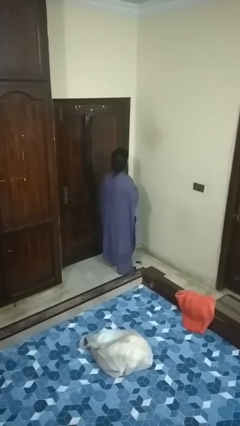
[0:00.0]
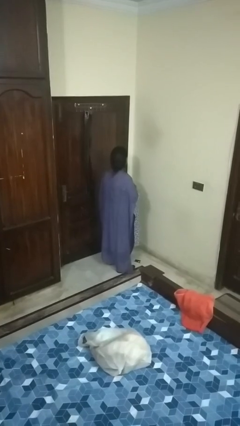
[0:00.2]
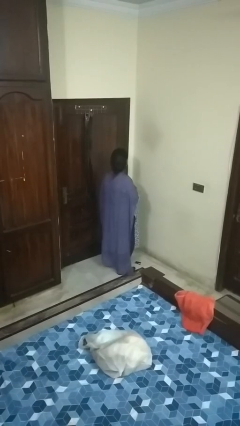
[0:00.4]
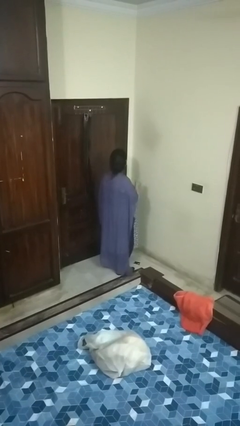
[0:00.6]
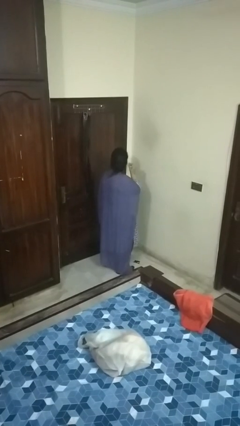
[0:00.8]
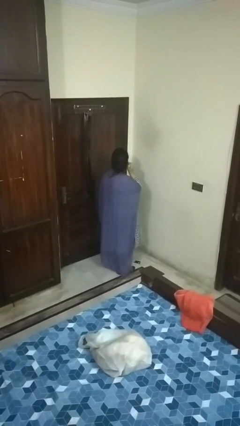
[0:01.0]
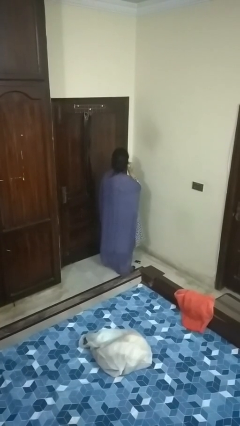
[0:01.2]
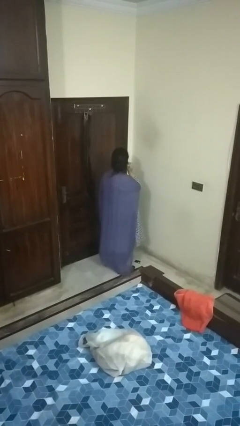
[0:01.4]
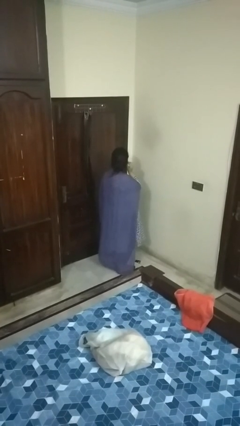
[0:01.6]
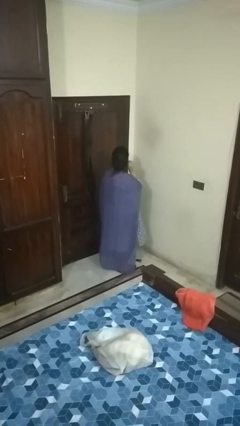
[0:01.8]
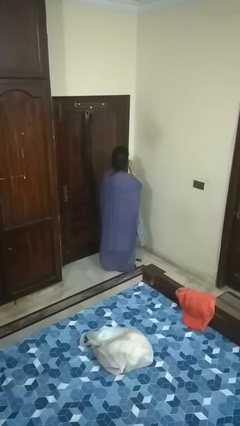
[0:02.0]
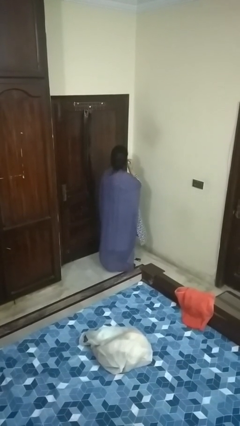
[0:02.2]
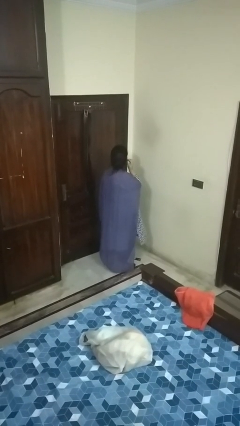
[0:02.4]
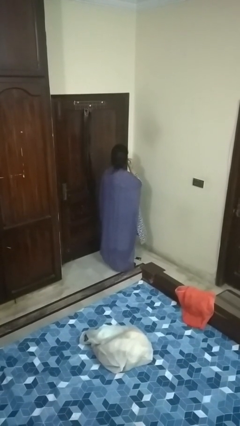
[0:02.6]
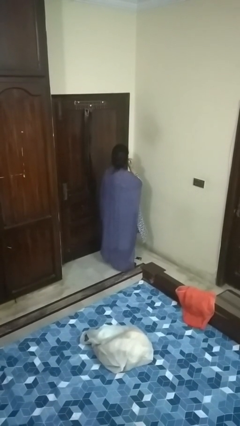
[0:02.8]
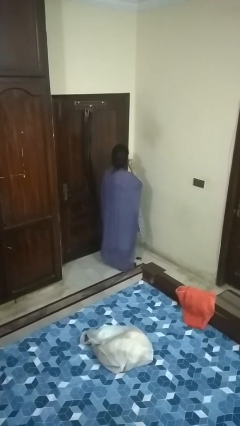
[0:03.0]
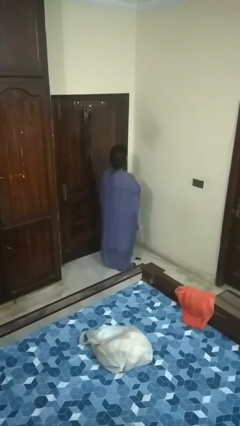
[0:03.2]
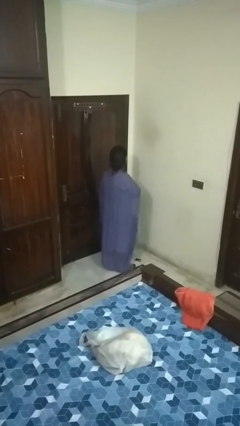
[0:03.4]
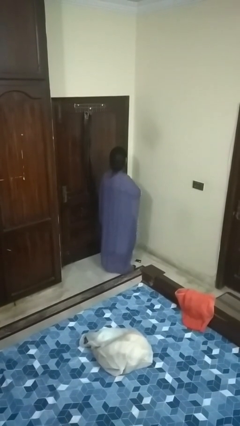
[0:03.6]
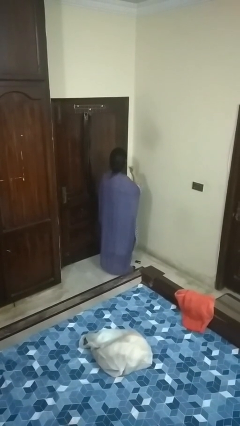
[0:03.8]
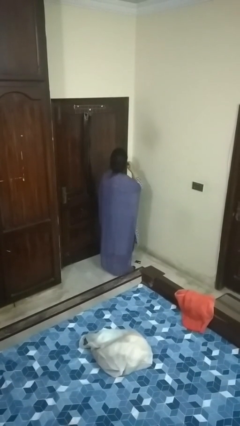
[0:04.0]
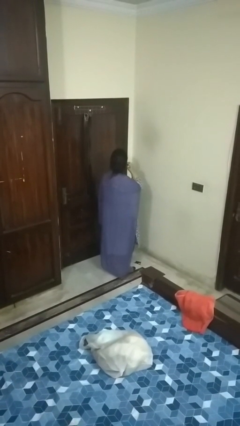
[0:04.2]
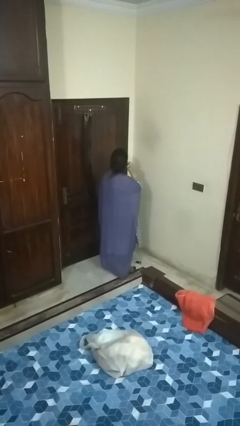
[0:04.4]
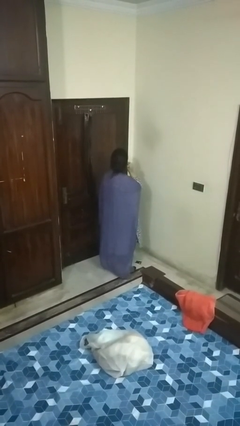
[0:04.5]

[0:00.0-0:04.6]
person puts on earrings

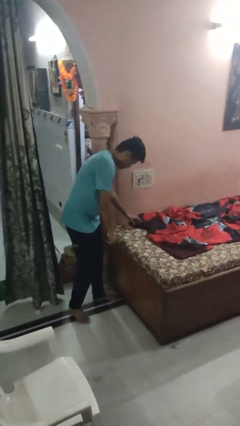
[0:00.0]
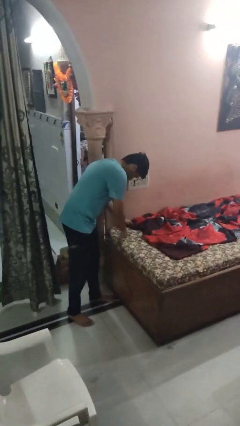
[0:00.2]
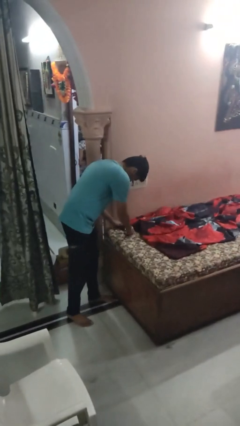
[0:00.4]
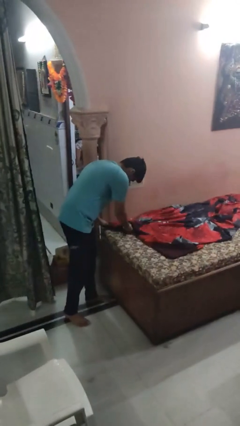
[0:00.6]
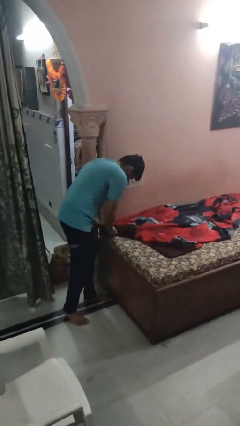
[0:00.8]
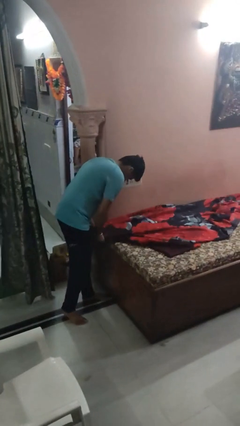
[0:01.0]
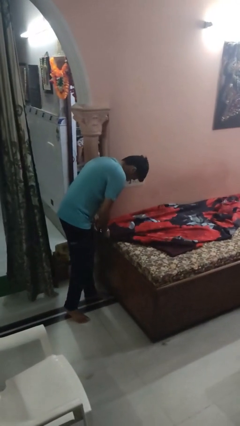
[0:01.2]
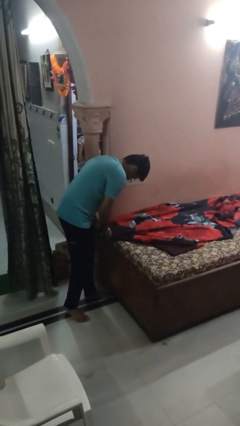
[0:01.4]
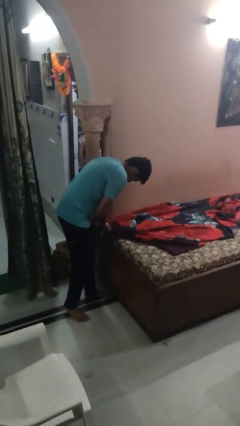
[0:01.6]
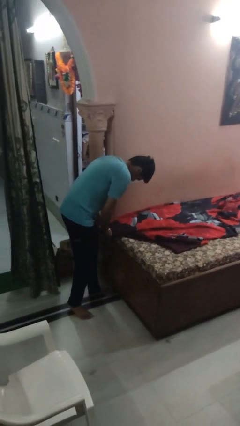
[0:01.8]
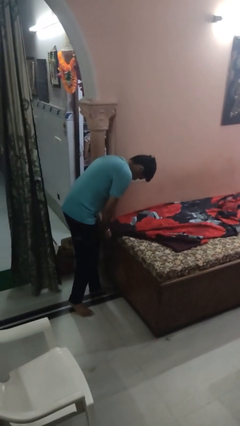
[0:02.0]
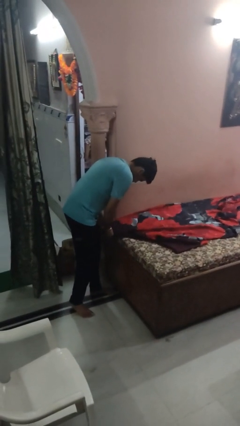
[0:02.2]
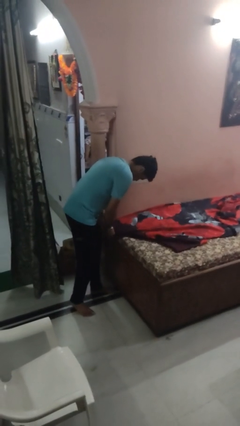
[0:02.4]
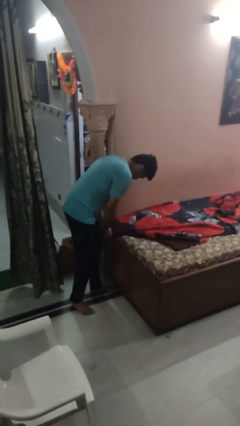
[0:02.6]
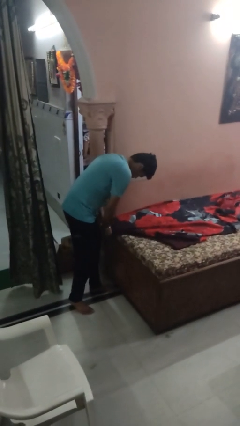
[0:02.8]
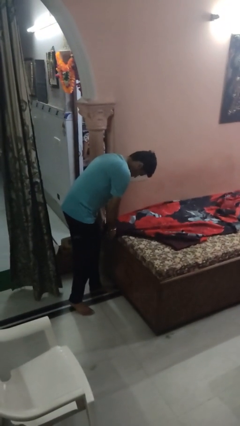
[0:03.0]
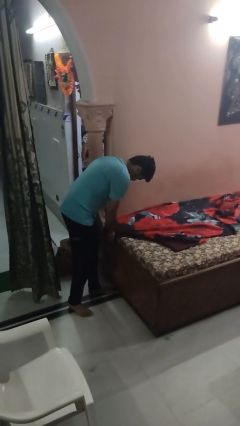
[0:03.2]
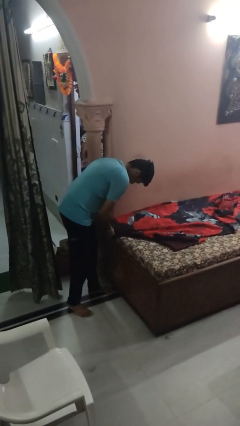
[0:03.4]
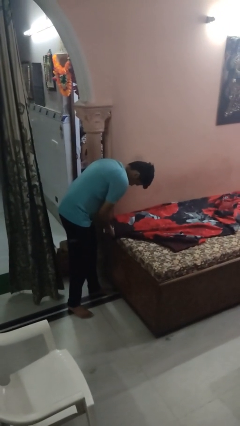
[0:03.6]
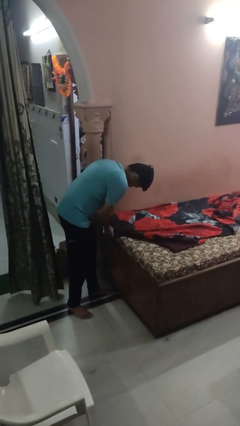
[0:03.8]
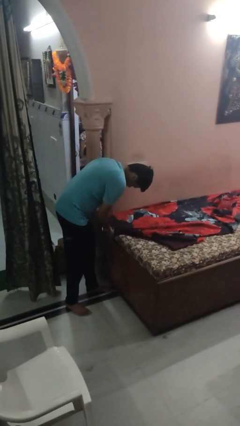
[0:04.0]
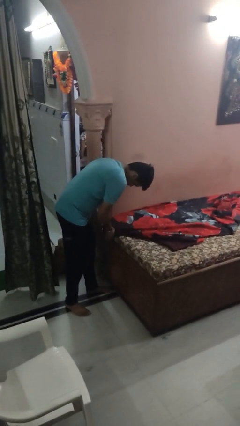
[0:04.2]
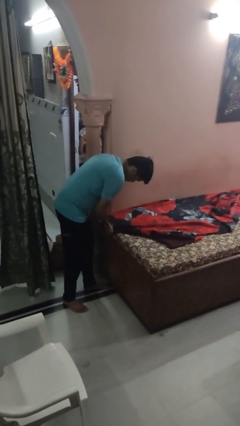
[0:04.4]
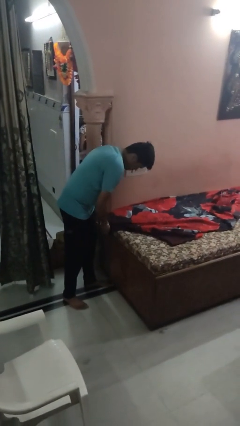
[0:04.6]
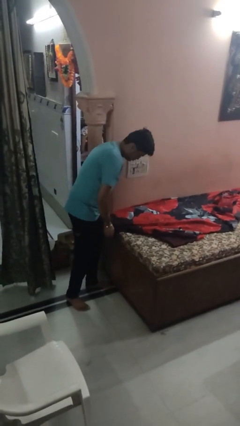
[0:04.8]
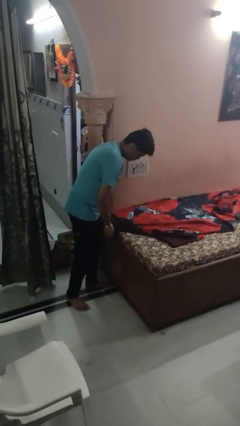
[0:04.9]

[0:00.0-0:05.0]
person makes bed

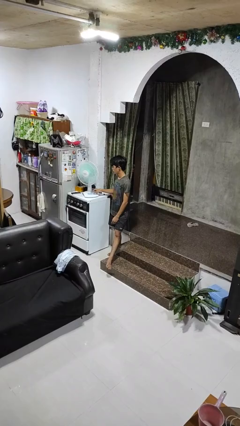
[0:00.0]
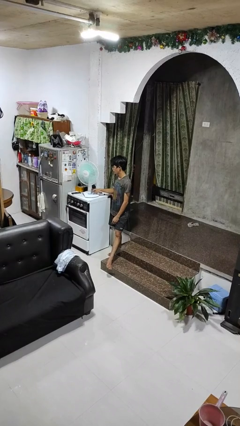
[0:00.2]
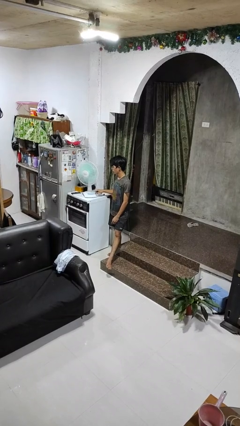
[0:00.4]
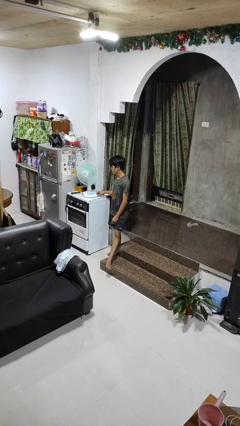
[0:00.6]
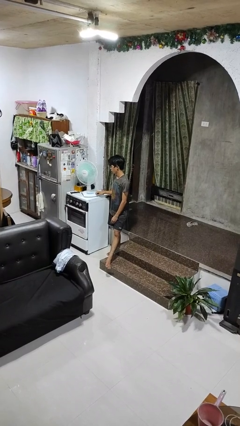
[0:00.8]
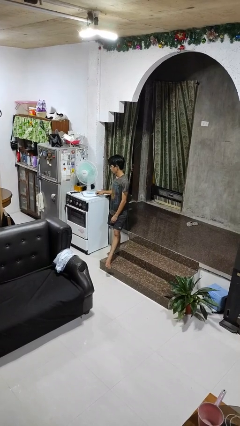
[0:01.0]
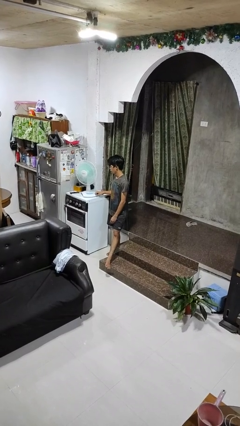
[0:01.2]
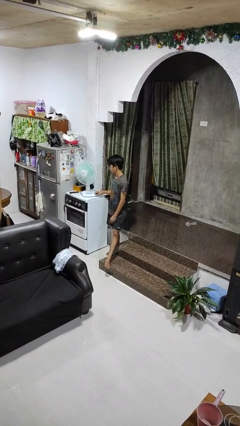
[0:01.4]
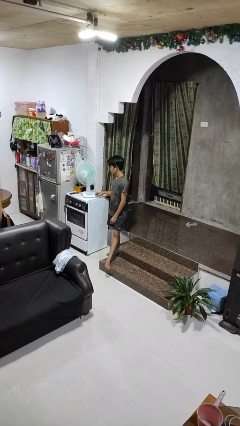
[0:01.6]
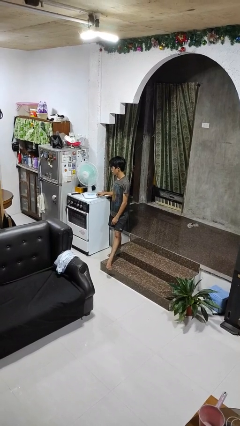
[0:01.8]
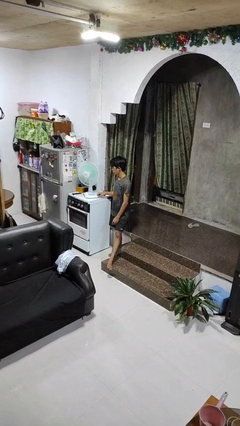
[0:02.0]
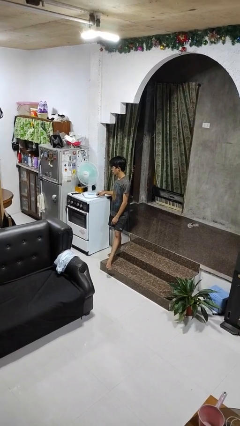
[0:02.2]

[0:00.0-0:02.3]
person turns on fan

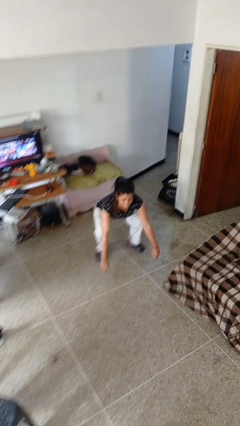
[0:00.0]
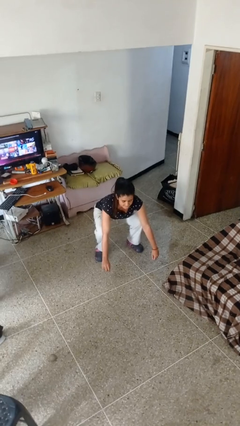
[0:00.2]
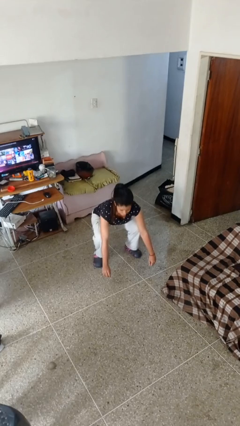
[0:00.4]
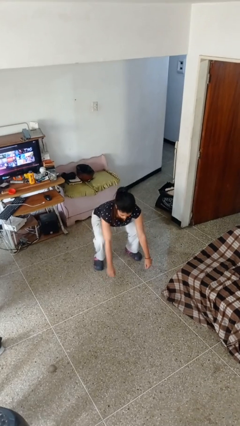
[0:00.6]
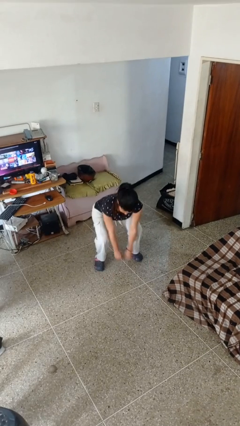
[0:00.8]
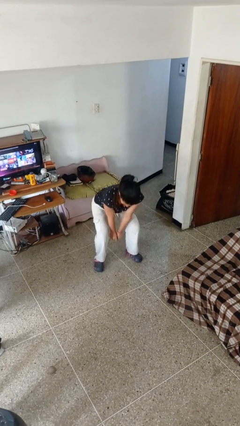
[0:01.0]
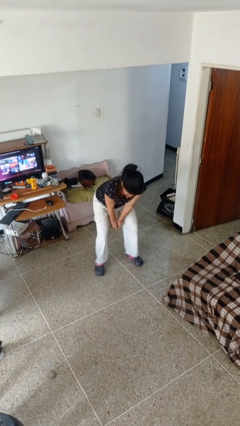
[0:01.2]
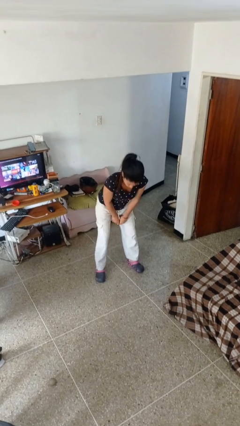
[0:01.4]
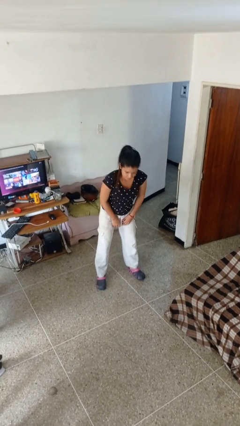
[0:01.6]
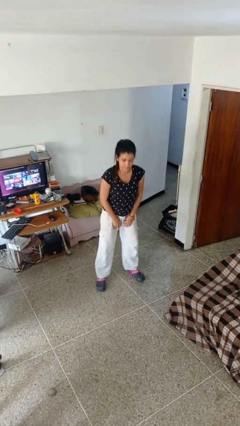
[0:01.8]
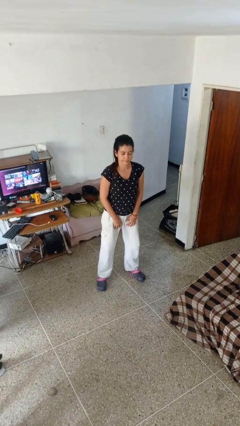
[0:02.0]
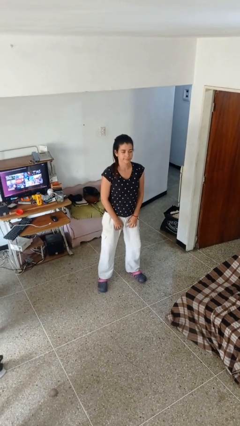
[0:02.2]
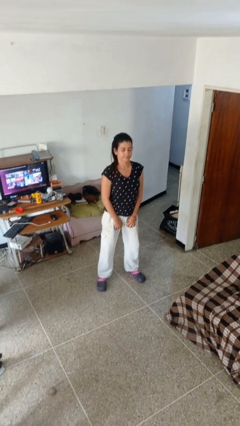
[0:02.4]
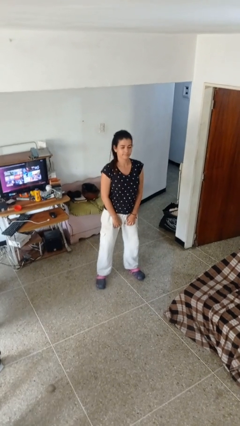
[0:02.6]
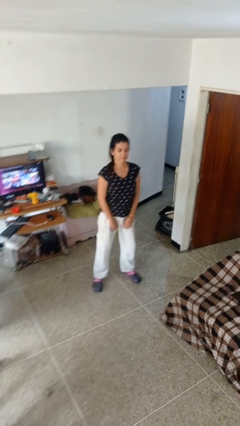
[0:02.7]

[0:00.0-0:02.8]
person stands up

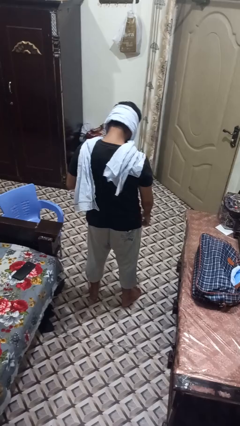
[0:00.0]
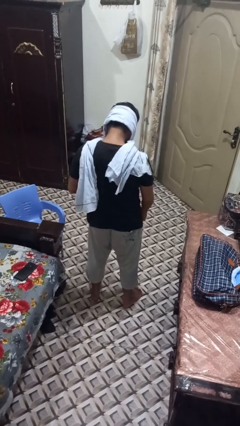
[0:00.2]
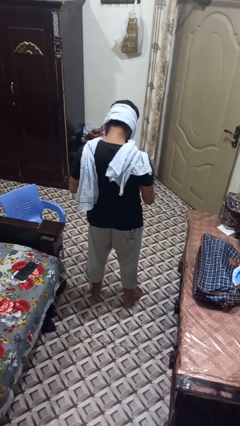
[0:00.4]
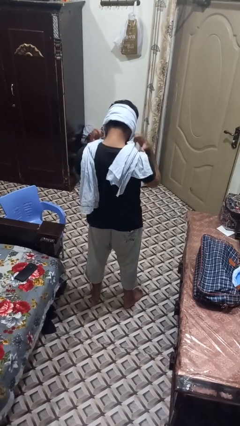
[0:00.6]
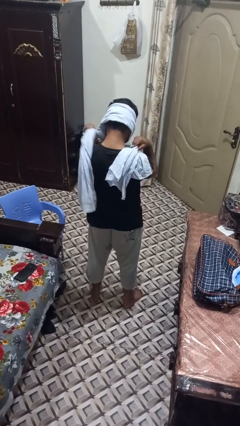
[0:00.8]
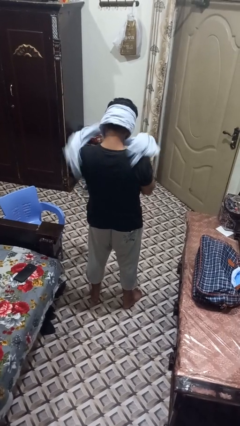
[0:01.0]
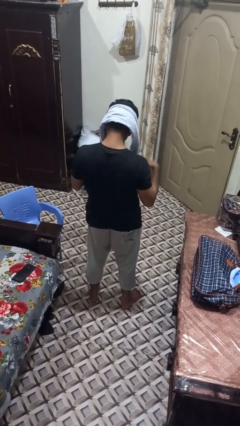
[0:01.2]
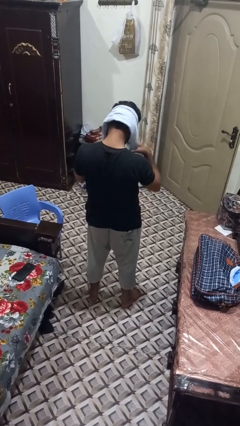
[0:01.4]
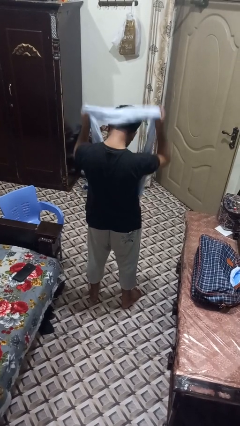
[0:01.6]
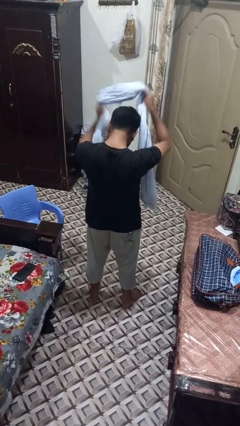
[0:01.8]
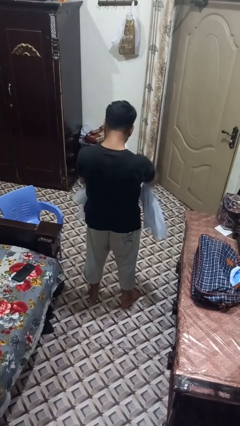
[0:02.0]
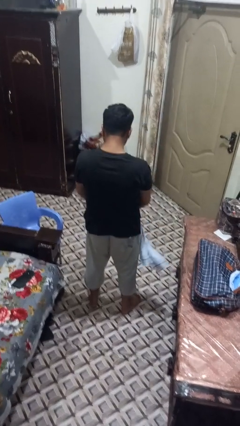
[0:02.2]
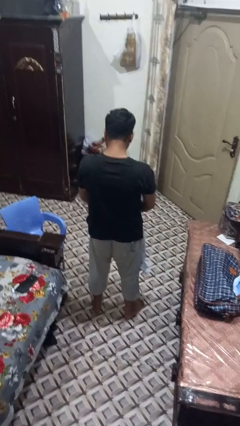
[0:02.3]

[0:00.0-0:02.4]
person takes off scarf

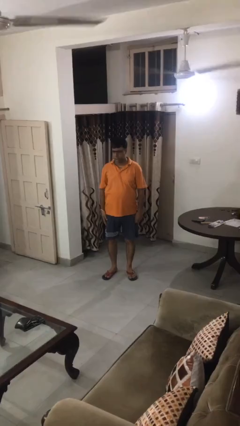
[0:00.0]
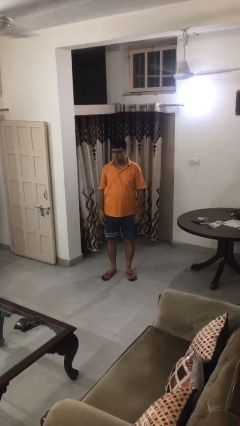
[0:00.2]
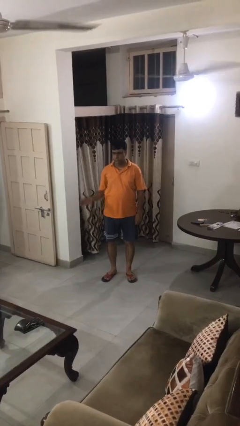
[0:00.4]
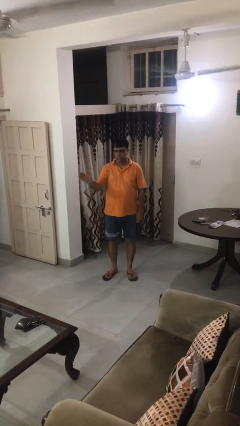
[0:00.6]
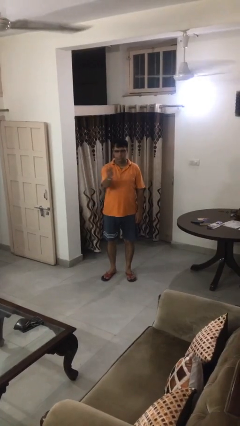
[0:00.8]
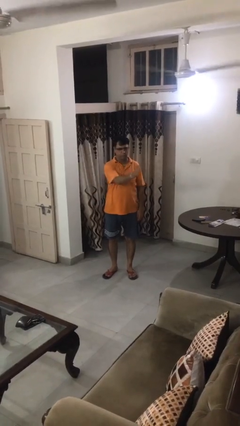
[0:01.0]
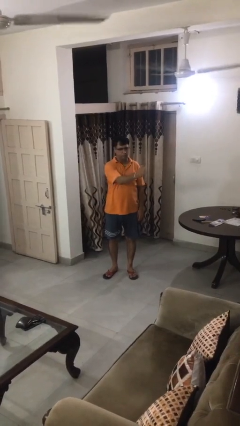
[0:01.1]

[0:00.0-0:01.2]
person gestures swipe left
